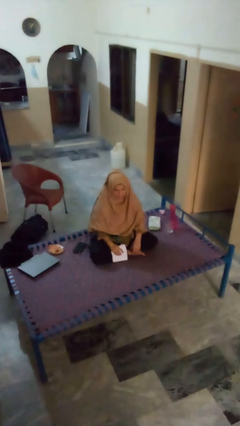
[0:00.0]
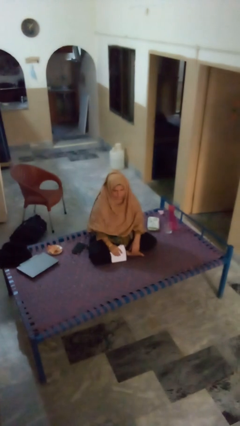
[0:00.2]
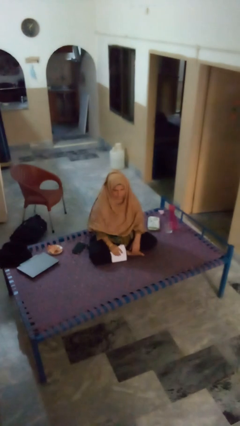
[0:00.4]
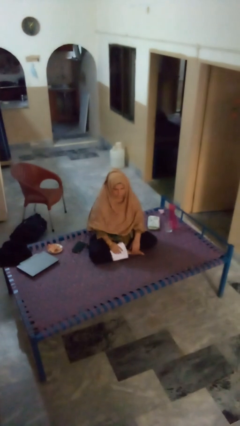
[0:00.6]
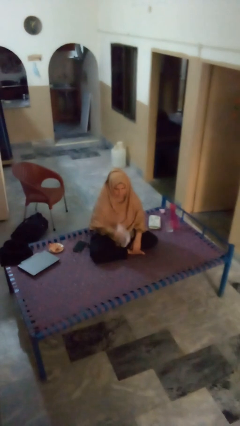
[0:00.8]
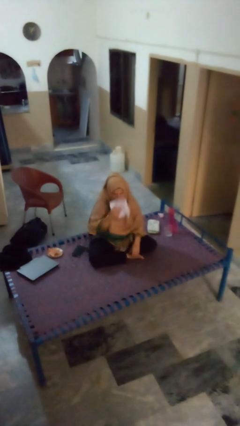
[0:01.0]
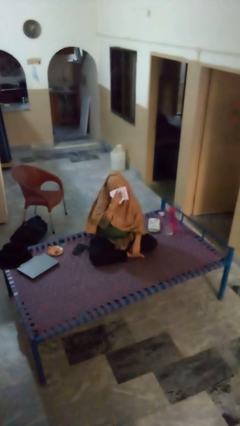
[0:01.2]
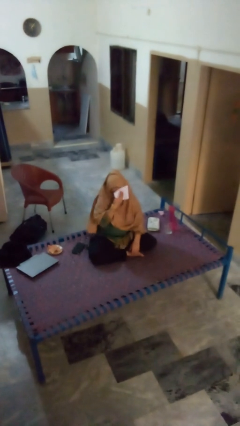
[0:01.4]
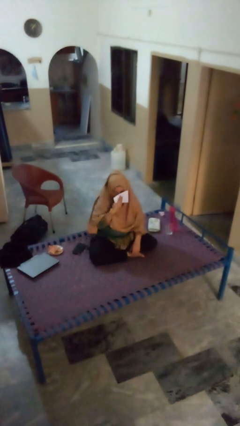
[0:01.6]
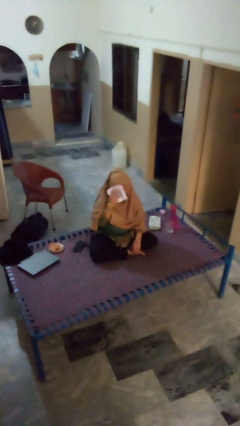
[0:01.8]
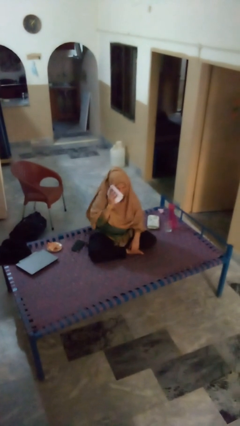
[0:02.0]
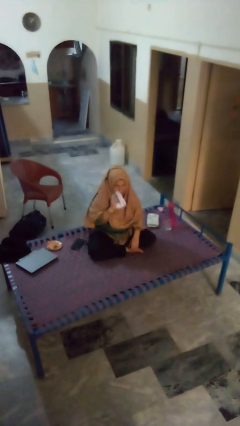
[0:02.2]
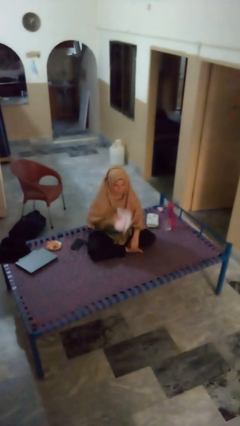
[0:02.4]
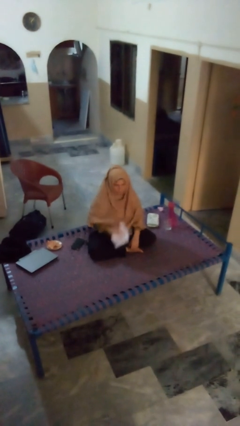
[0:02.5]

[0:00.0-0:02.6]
person wipes mouth with napkin

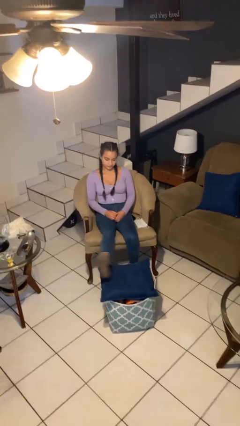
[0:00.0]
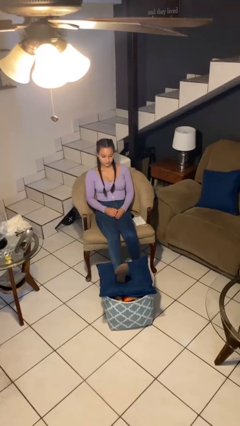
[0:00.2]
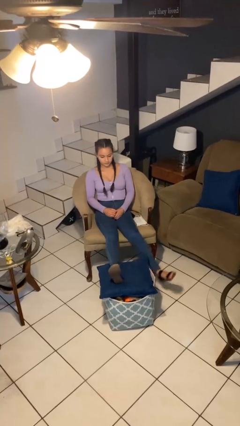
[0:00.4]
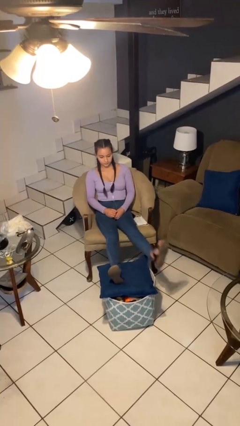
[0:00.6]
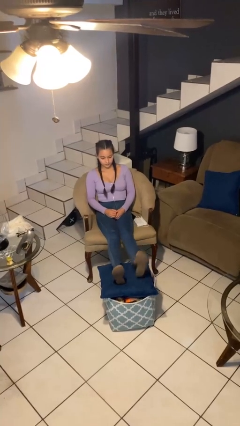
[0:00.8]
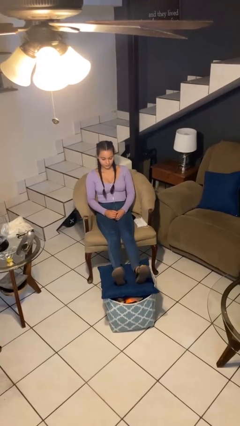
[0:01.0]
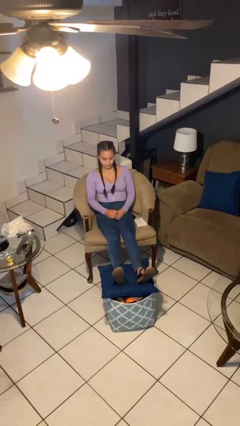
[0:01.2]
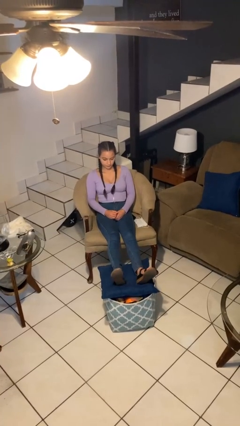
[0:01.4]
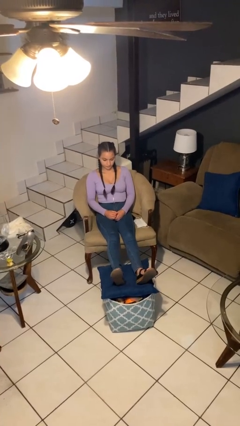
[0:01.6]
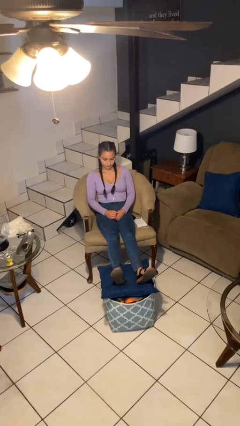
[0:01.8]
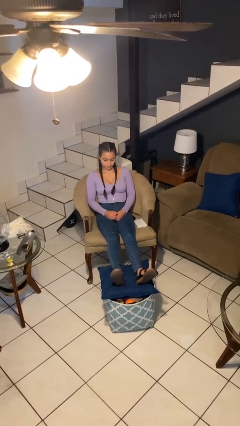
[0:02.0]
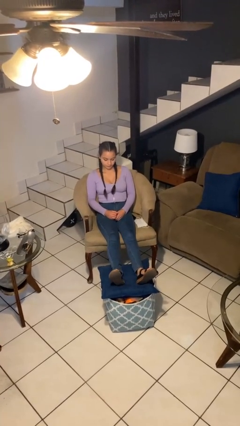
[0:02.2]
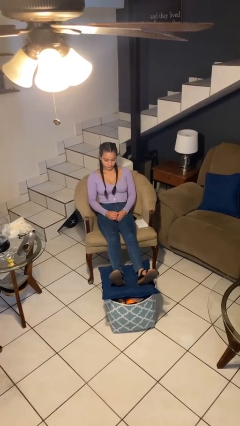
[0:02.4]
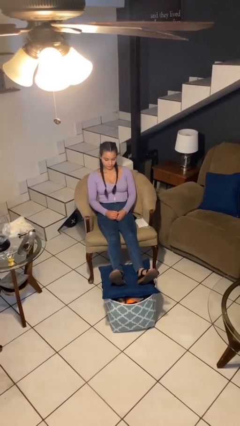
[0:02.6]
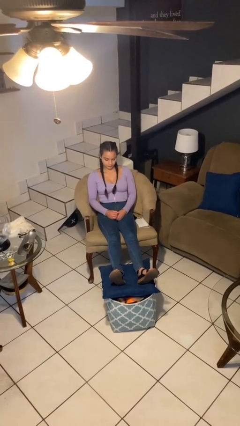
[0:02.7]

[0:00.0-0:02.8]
person puts feet up

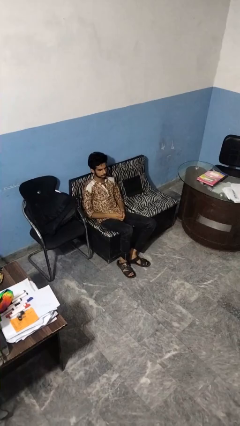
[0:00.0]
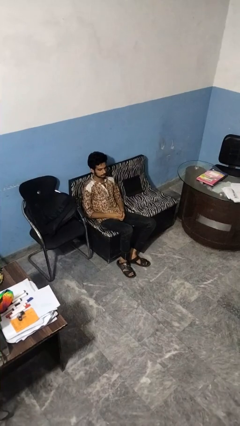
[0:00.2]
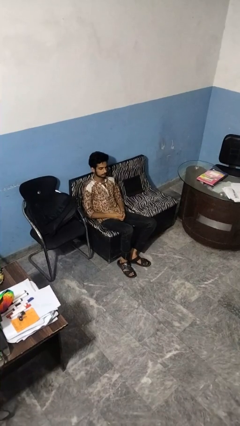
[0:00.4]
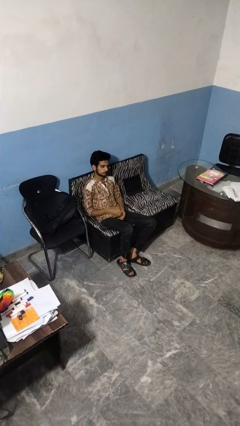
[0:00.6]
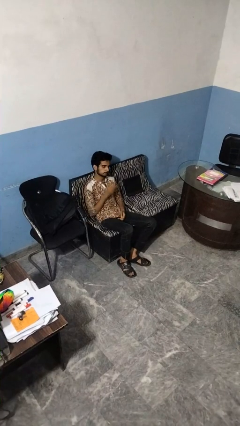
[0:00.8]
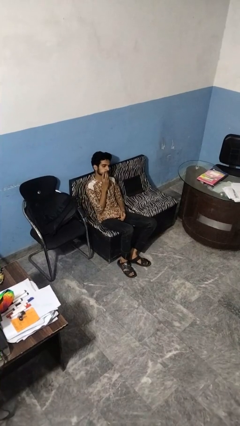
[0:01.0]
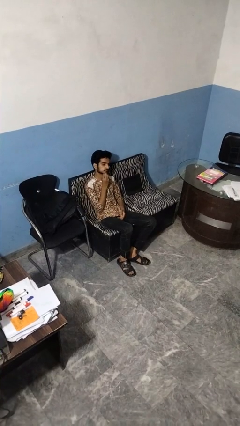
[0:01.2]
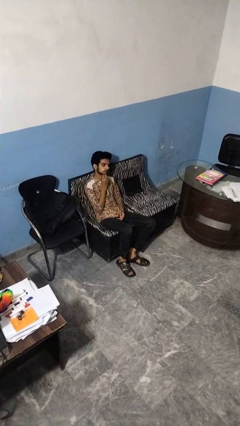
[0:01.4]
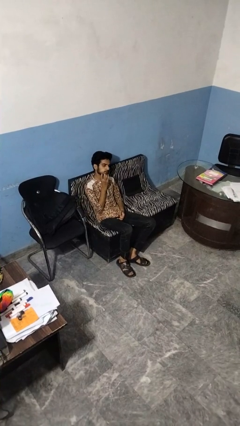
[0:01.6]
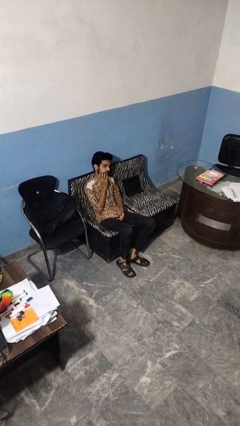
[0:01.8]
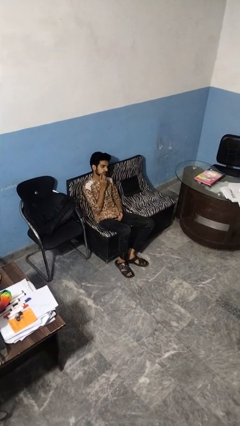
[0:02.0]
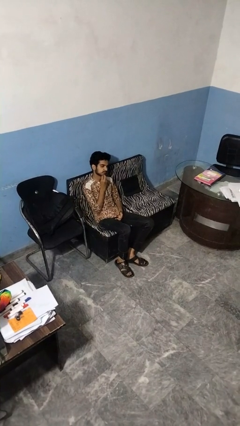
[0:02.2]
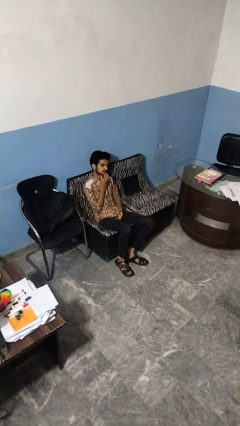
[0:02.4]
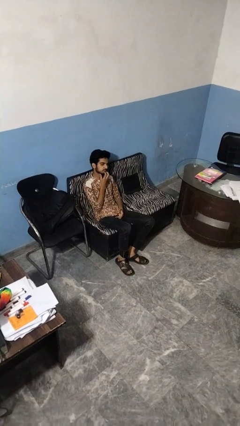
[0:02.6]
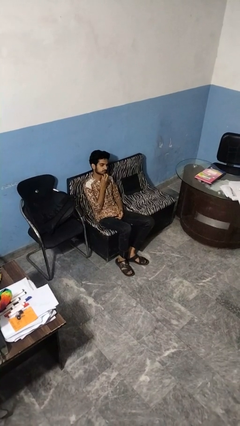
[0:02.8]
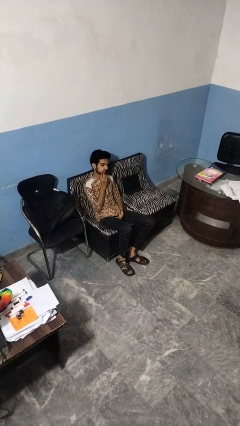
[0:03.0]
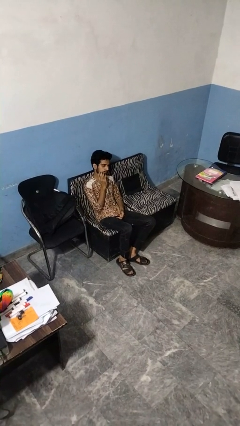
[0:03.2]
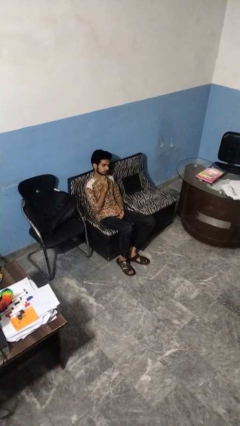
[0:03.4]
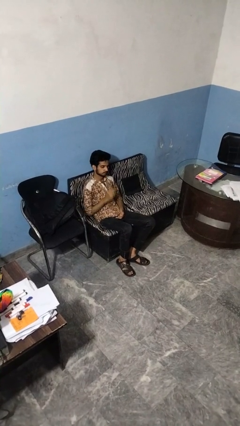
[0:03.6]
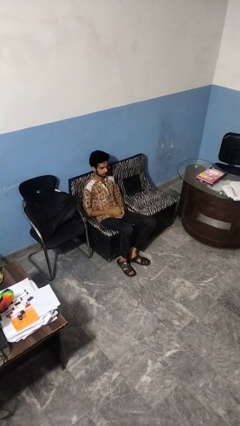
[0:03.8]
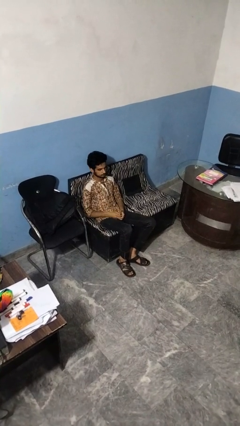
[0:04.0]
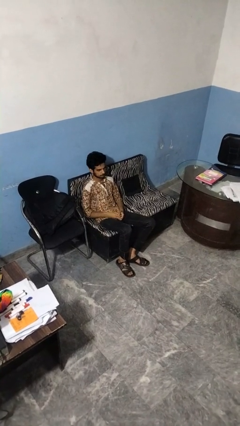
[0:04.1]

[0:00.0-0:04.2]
person strokes chin

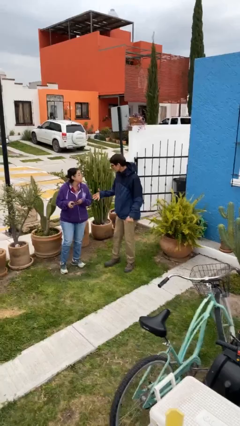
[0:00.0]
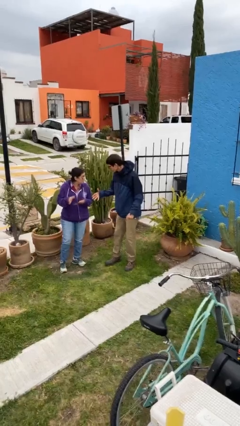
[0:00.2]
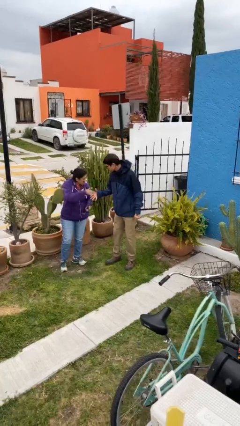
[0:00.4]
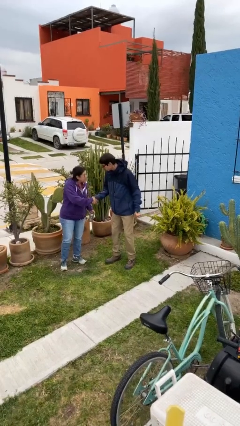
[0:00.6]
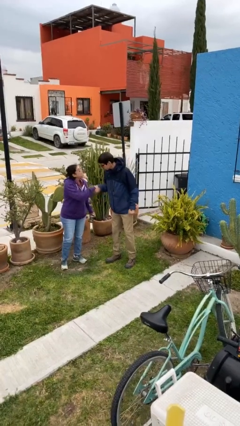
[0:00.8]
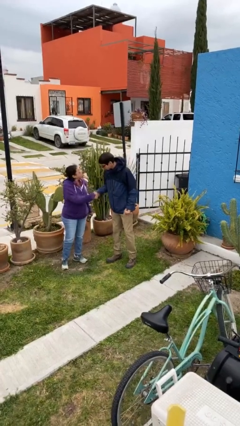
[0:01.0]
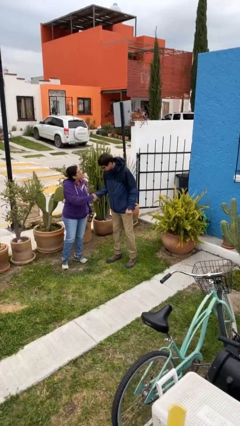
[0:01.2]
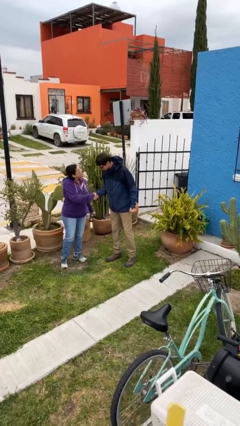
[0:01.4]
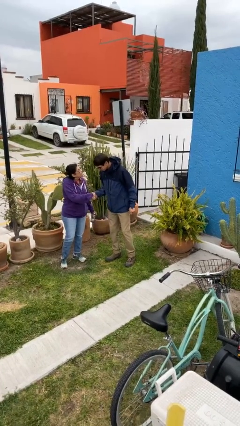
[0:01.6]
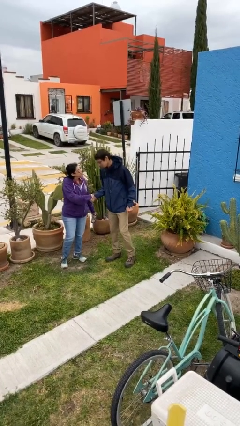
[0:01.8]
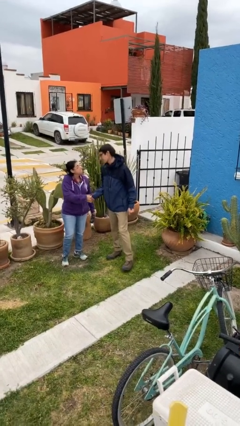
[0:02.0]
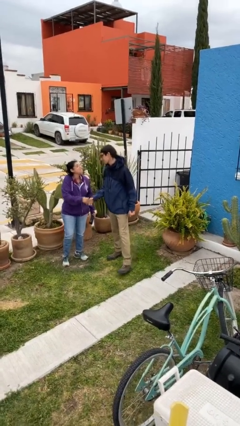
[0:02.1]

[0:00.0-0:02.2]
person shakes hand

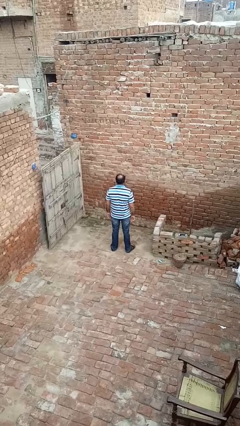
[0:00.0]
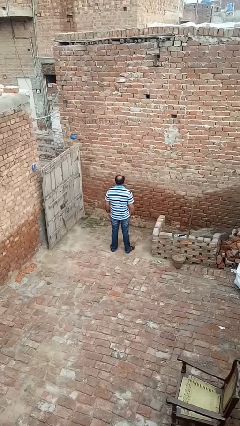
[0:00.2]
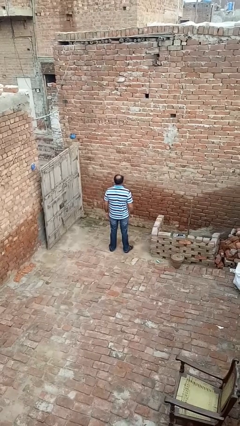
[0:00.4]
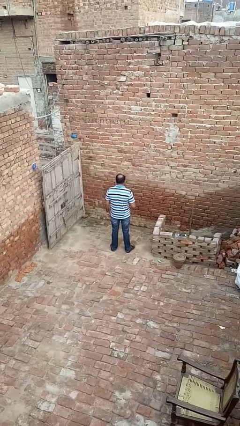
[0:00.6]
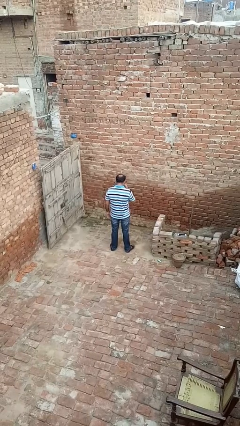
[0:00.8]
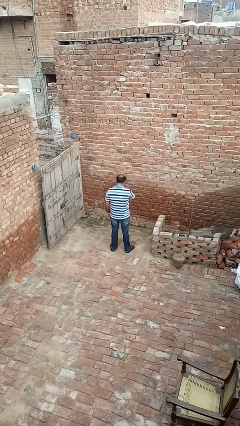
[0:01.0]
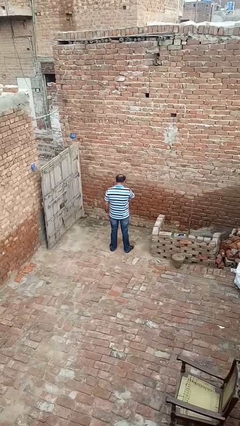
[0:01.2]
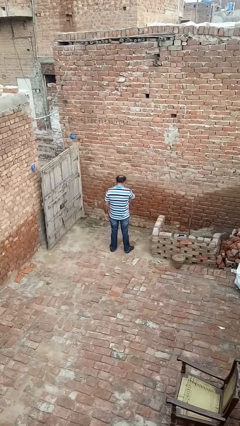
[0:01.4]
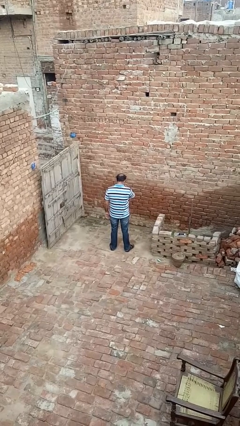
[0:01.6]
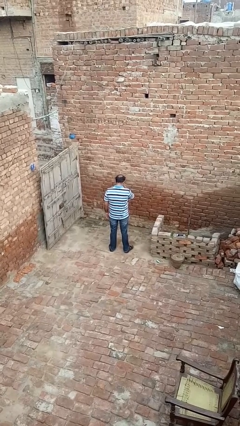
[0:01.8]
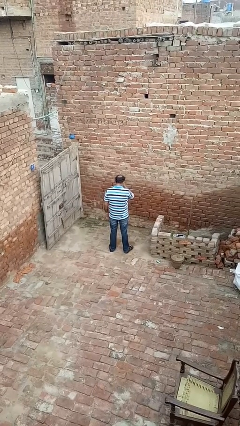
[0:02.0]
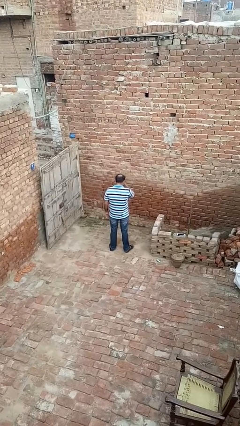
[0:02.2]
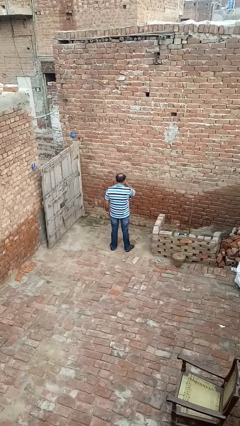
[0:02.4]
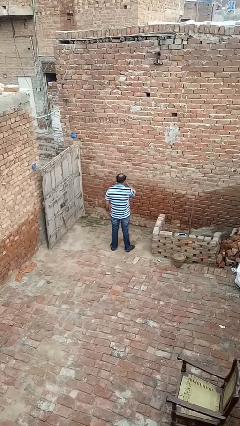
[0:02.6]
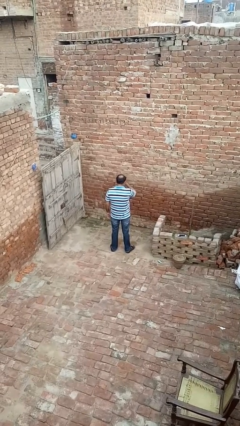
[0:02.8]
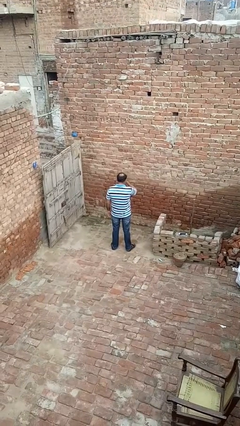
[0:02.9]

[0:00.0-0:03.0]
person rubs eyes

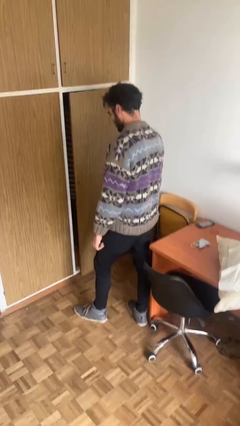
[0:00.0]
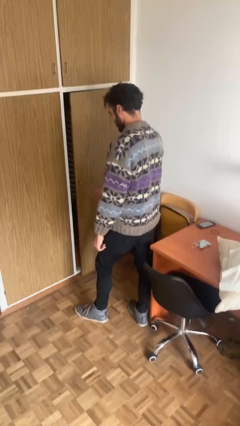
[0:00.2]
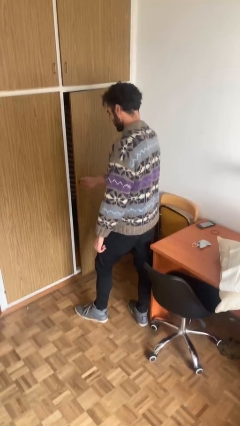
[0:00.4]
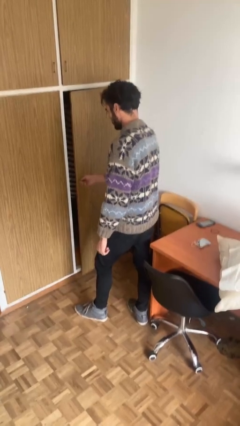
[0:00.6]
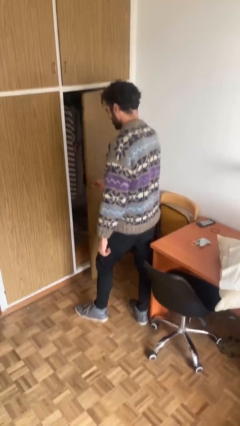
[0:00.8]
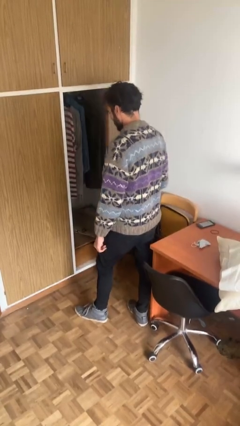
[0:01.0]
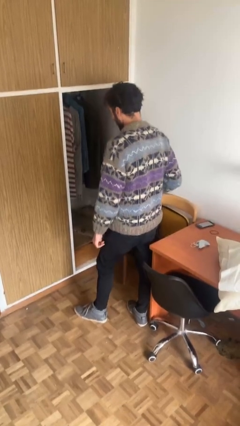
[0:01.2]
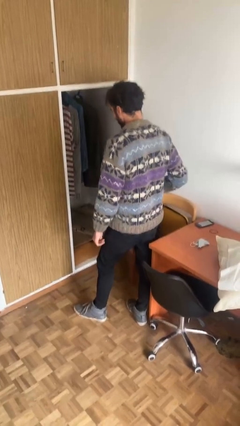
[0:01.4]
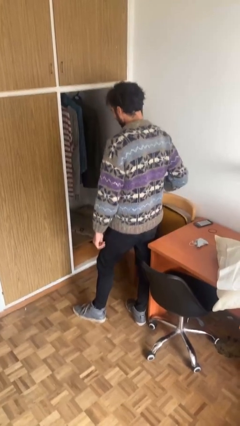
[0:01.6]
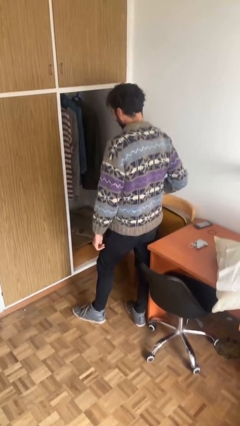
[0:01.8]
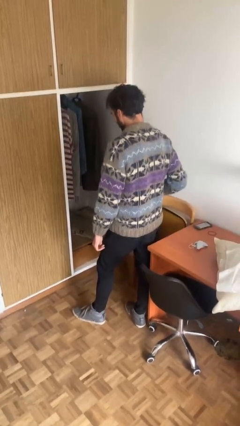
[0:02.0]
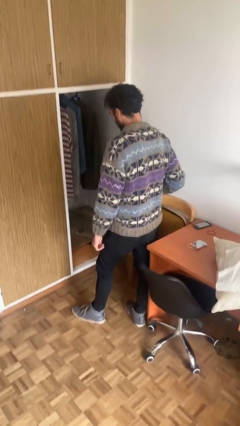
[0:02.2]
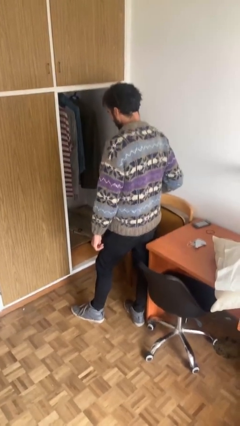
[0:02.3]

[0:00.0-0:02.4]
person opens closet door
